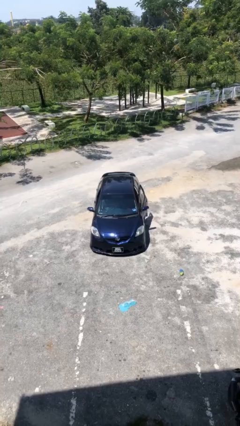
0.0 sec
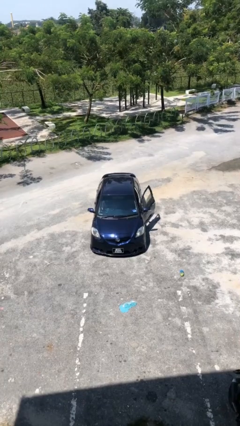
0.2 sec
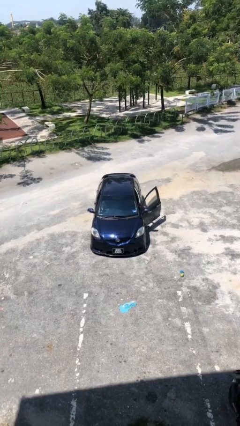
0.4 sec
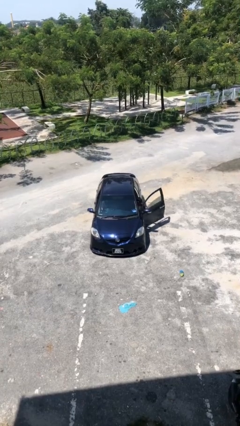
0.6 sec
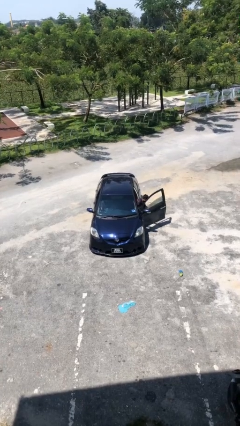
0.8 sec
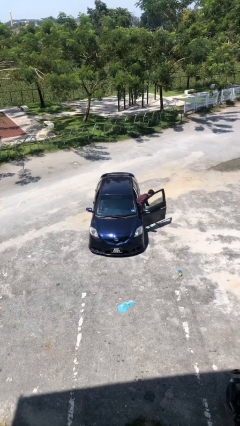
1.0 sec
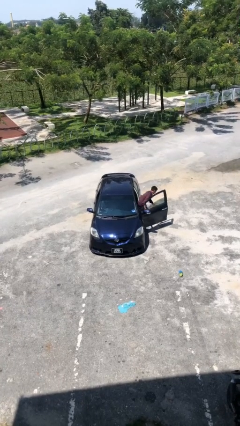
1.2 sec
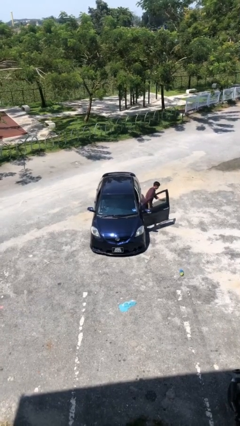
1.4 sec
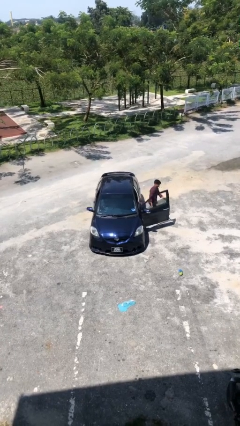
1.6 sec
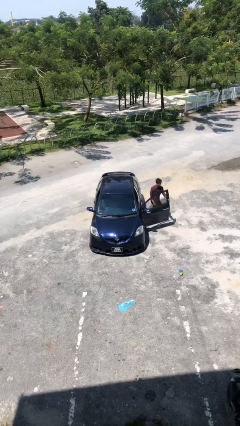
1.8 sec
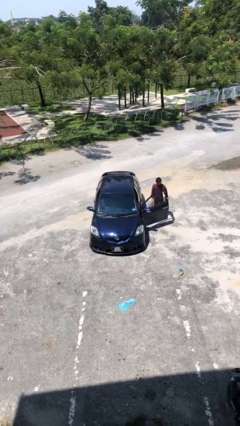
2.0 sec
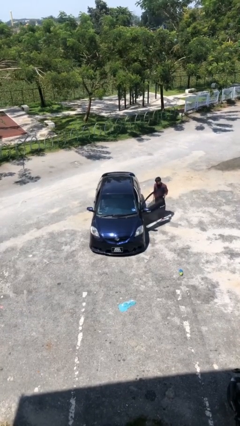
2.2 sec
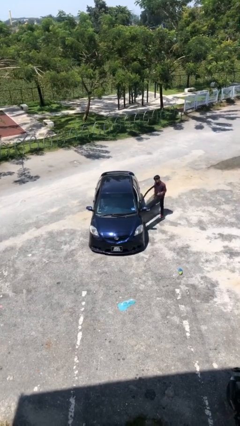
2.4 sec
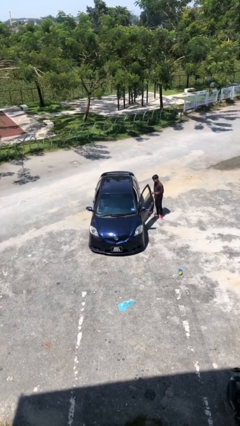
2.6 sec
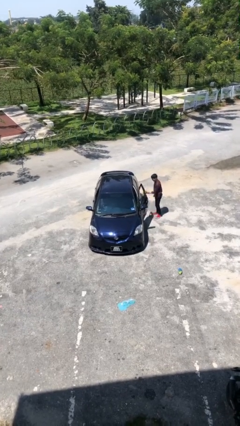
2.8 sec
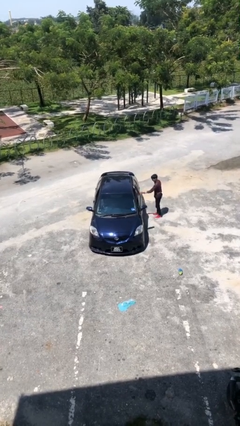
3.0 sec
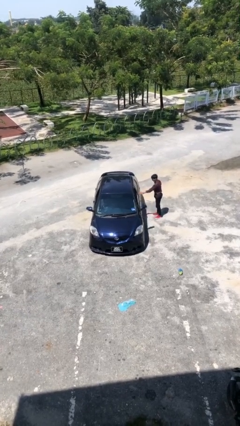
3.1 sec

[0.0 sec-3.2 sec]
car drops off person

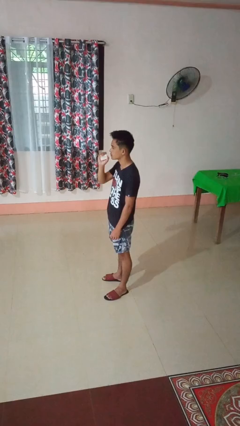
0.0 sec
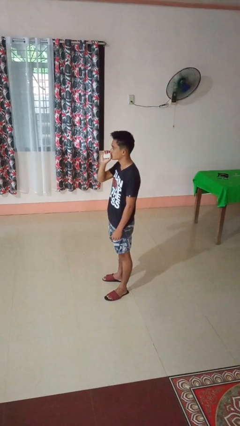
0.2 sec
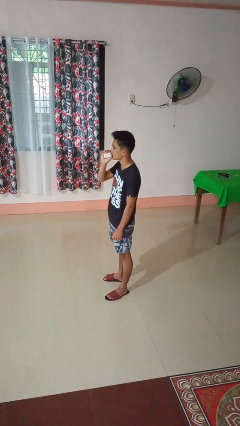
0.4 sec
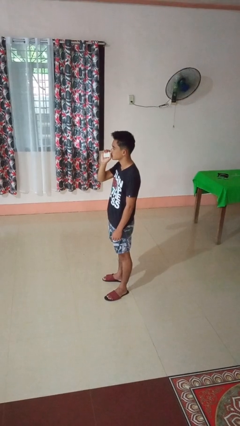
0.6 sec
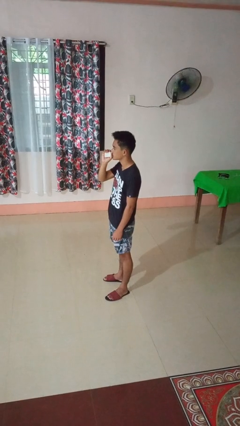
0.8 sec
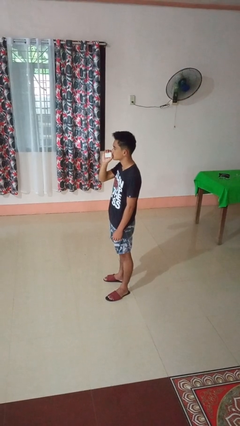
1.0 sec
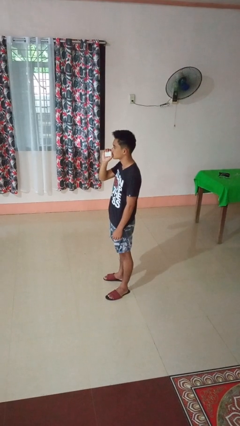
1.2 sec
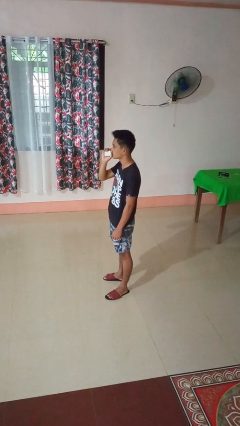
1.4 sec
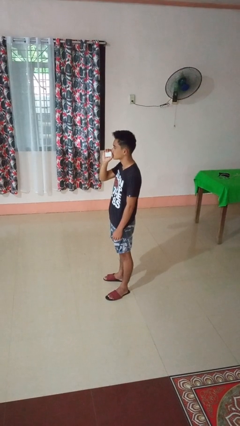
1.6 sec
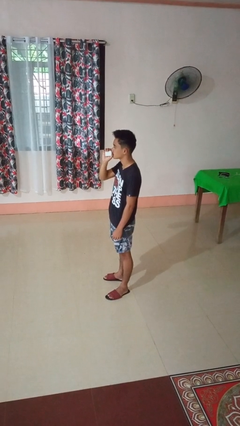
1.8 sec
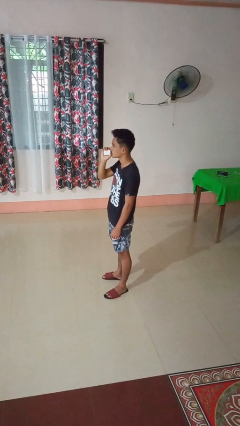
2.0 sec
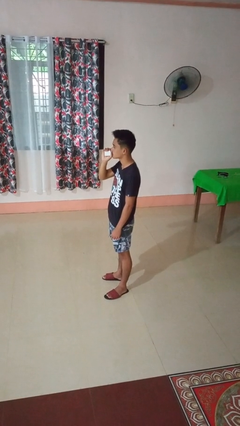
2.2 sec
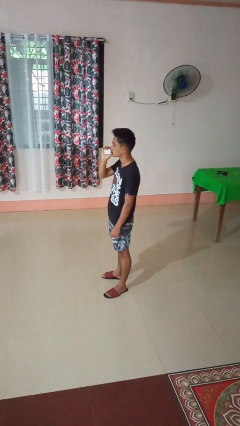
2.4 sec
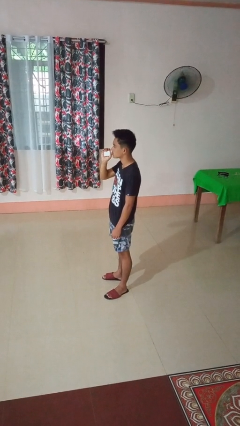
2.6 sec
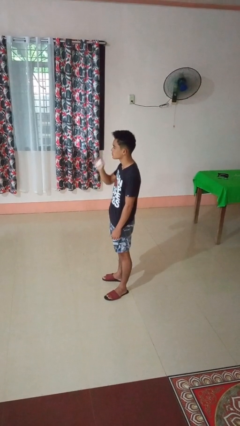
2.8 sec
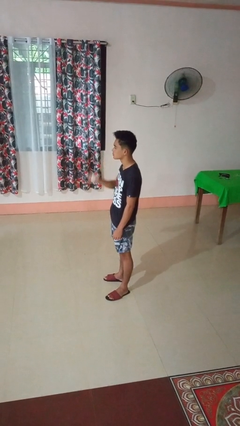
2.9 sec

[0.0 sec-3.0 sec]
person vapes

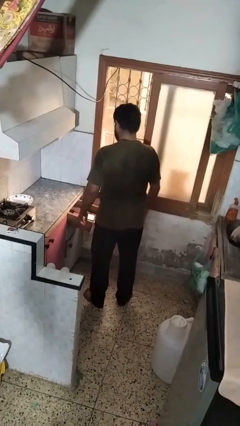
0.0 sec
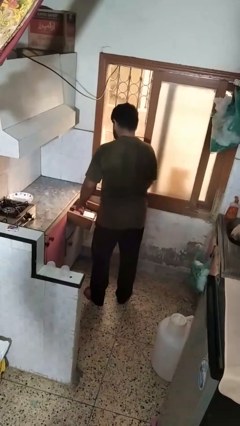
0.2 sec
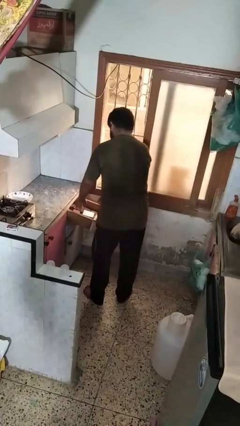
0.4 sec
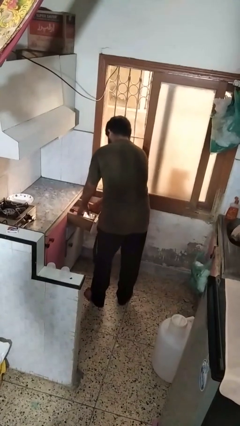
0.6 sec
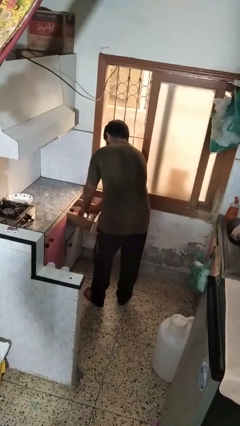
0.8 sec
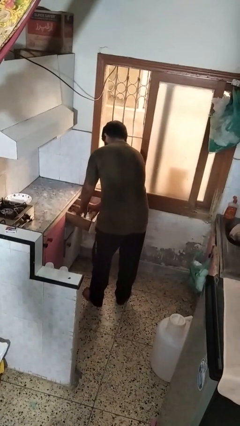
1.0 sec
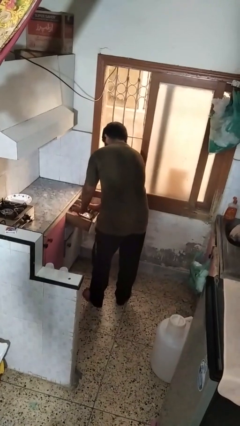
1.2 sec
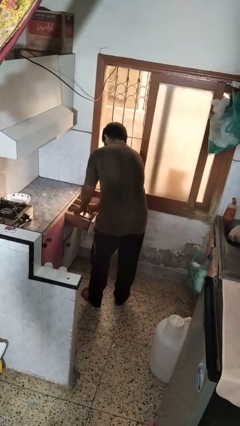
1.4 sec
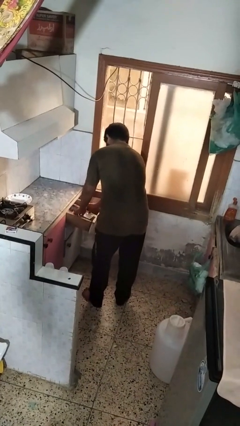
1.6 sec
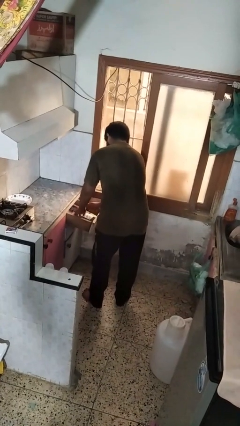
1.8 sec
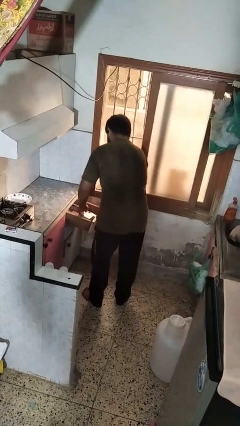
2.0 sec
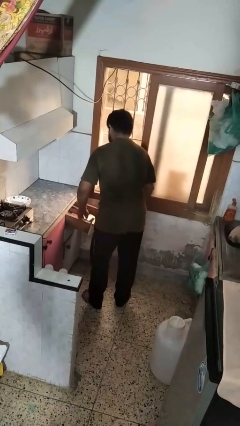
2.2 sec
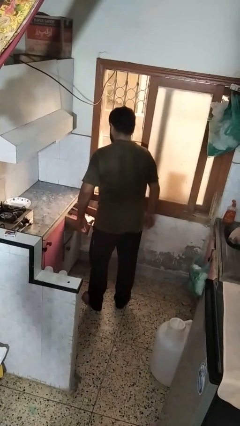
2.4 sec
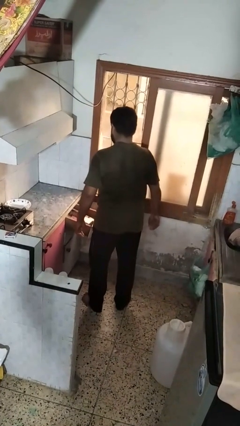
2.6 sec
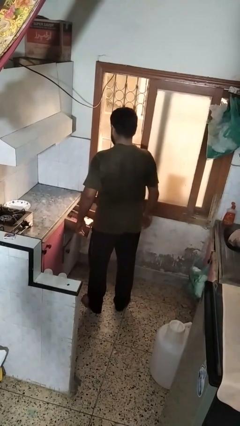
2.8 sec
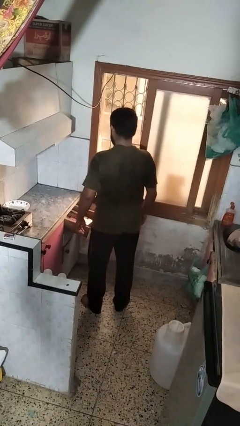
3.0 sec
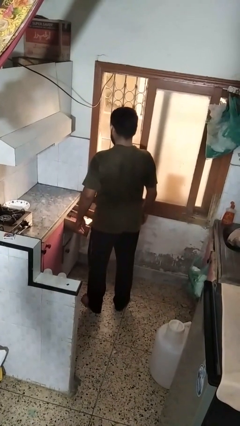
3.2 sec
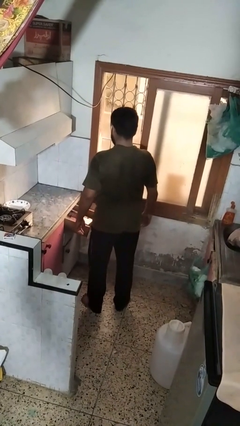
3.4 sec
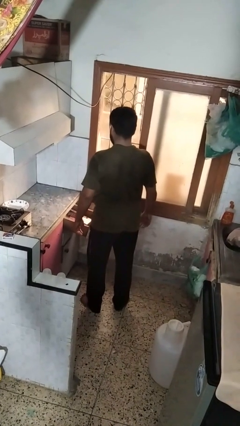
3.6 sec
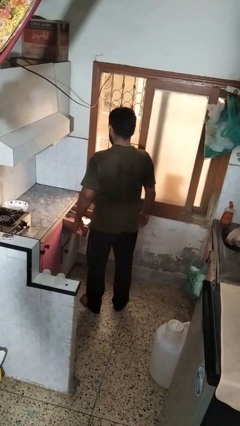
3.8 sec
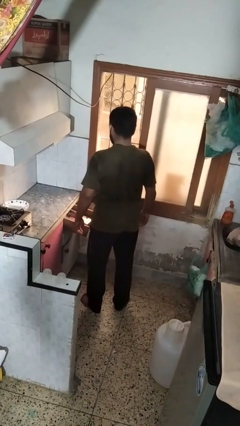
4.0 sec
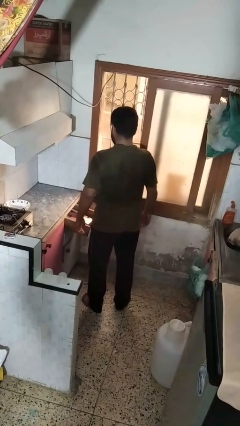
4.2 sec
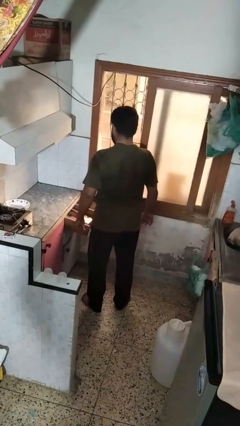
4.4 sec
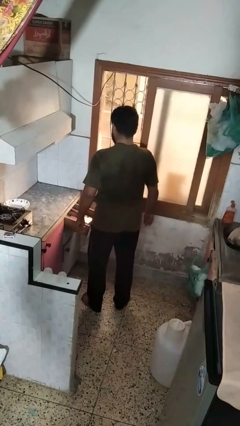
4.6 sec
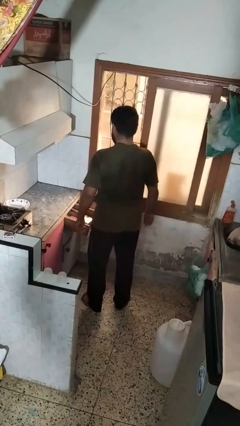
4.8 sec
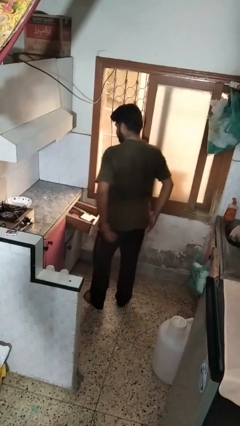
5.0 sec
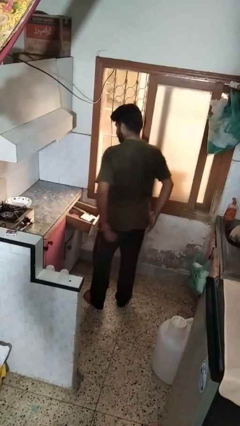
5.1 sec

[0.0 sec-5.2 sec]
person searches in kitchen drawer

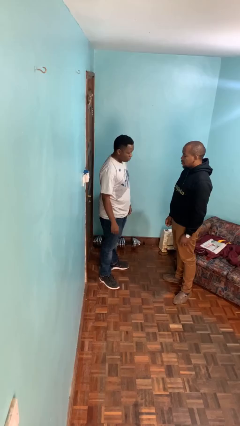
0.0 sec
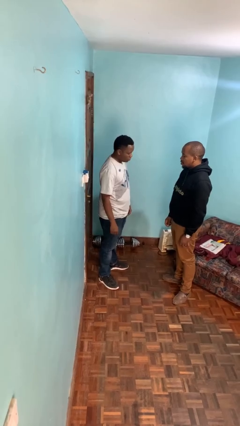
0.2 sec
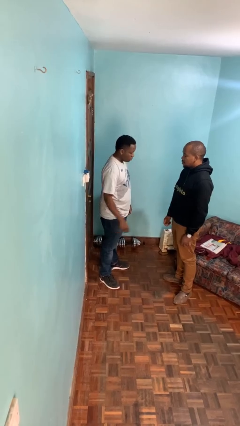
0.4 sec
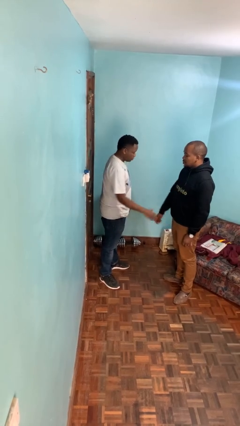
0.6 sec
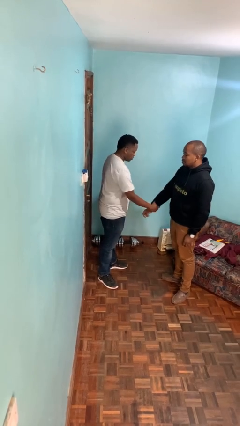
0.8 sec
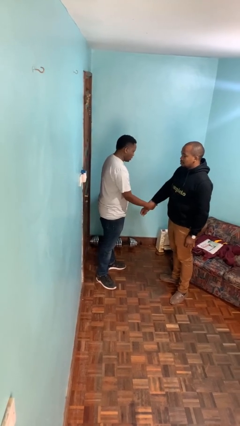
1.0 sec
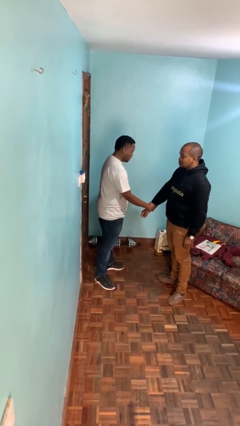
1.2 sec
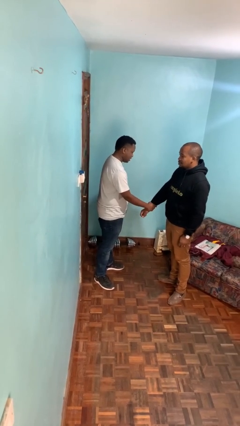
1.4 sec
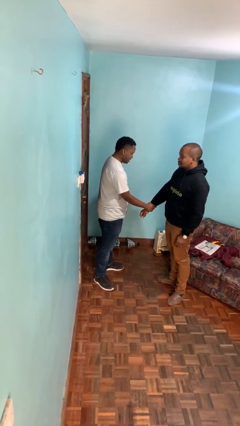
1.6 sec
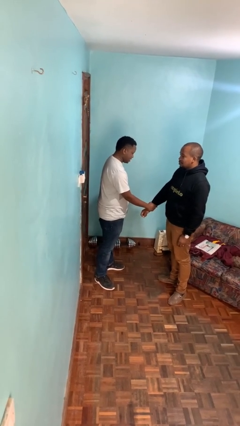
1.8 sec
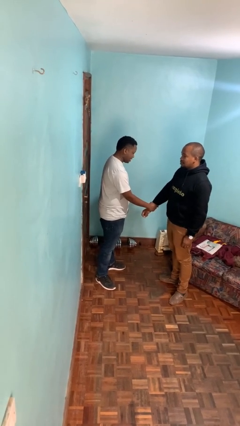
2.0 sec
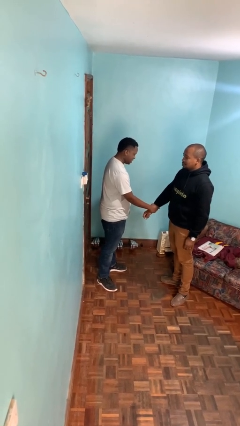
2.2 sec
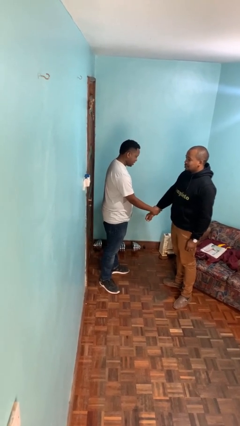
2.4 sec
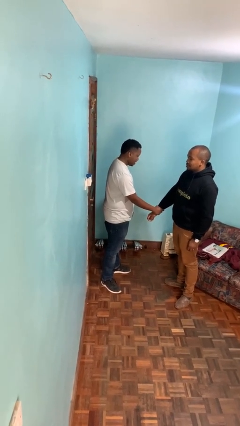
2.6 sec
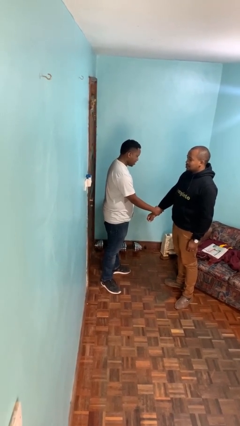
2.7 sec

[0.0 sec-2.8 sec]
person grabs person by forearm

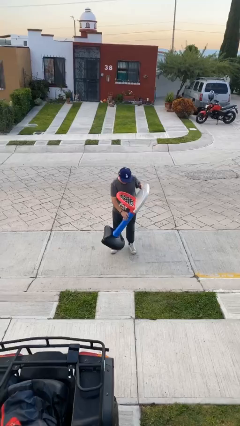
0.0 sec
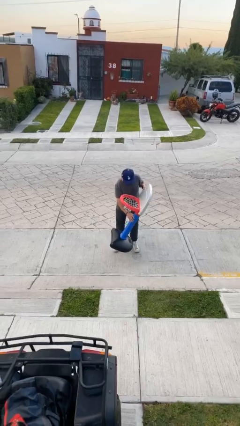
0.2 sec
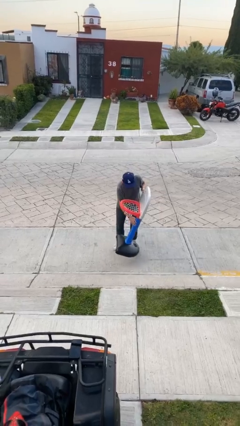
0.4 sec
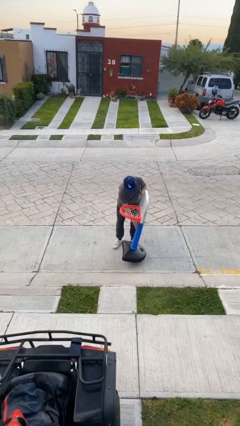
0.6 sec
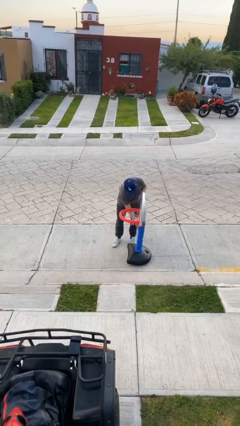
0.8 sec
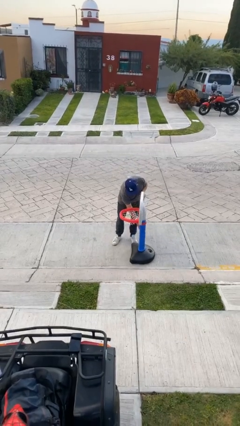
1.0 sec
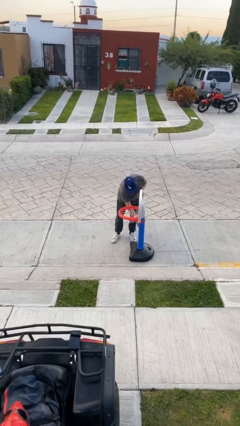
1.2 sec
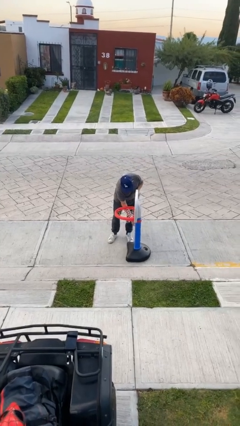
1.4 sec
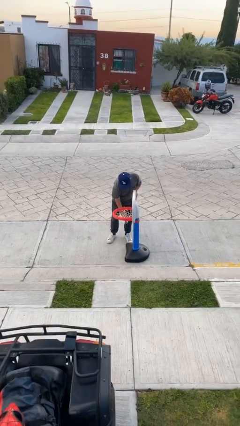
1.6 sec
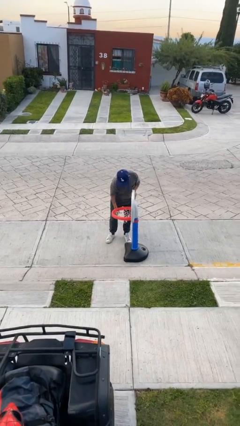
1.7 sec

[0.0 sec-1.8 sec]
person puts down object on floor

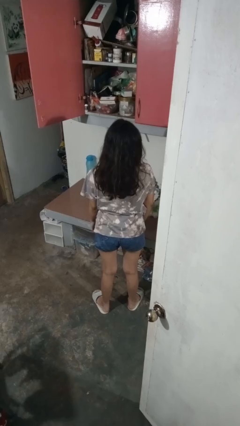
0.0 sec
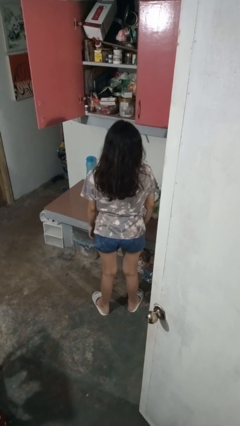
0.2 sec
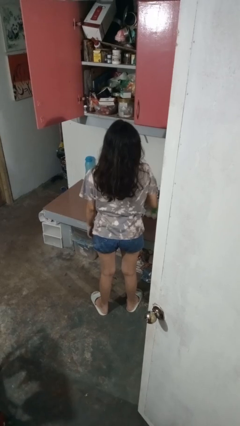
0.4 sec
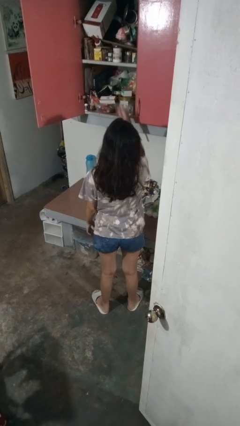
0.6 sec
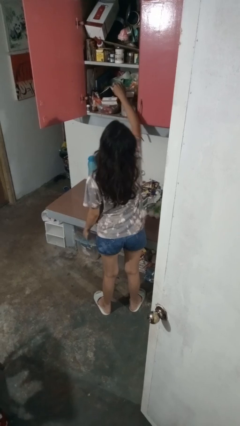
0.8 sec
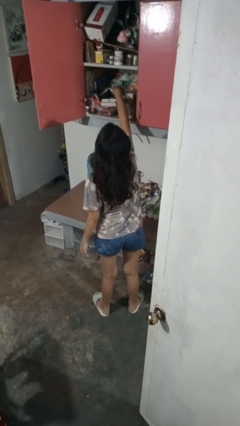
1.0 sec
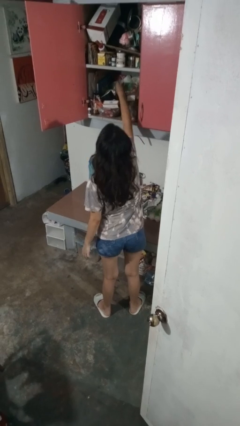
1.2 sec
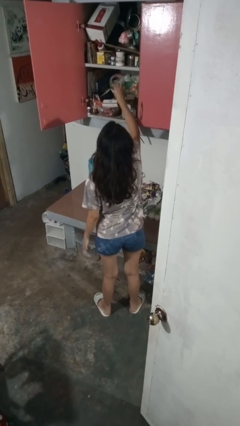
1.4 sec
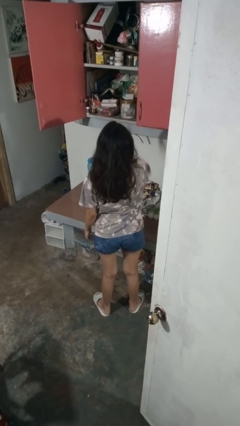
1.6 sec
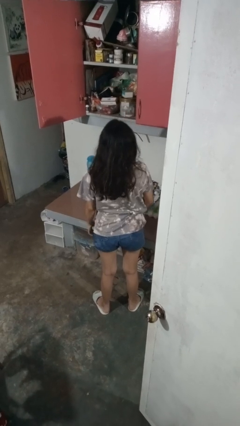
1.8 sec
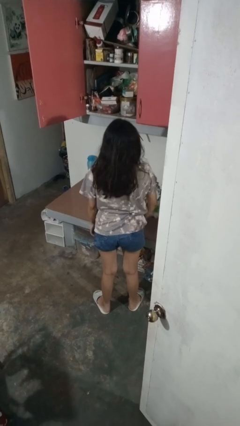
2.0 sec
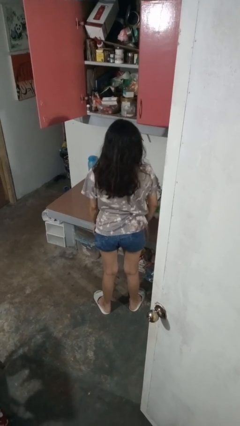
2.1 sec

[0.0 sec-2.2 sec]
person takes object from cabinet
